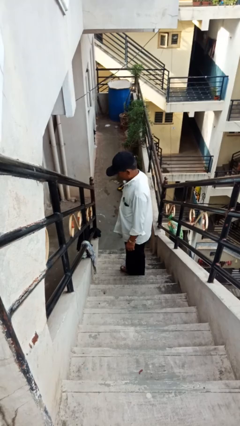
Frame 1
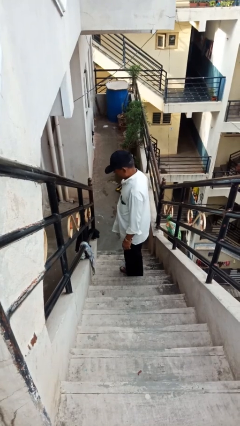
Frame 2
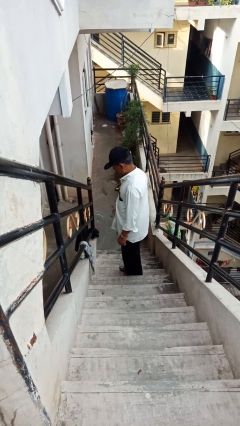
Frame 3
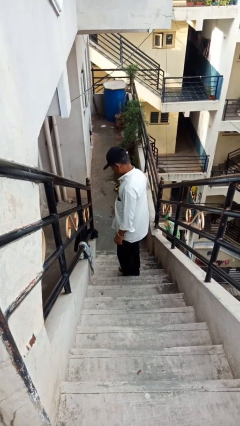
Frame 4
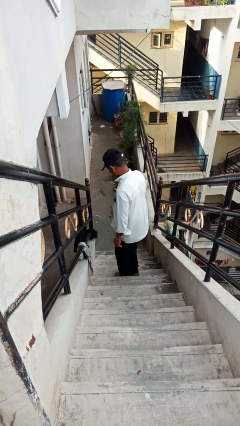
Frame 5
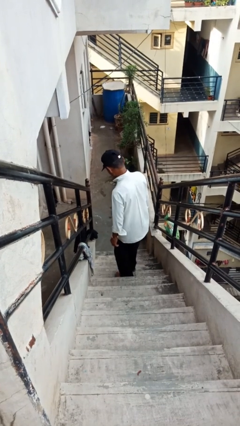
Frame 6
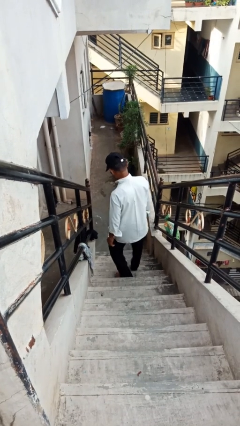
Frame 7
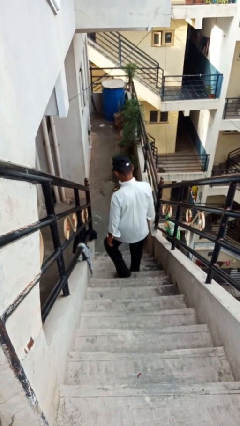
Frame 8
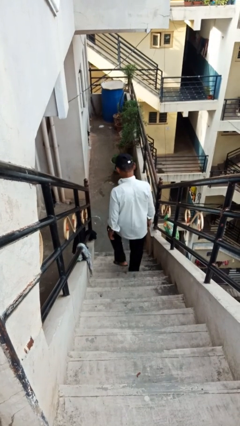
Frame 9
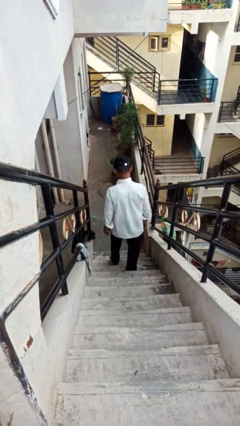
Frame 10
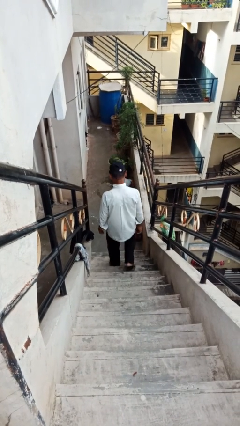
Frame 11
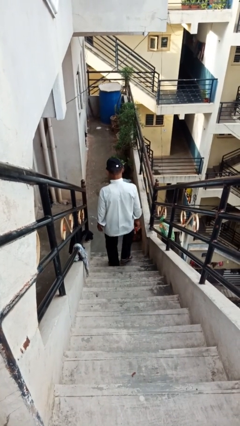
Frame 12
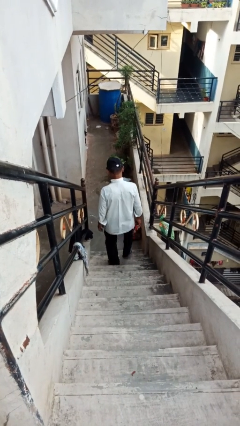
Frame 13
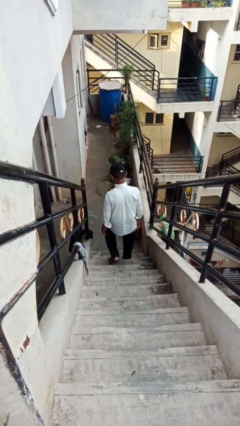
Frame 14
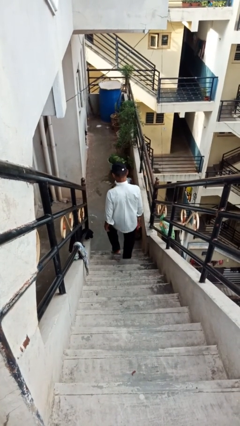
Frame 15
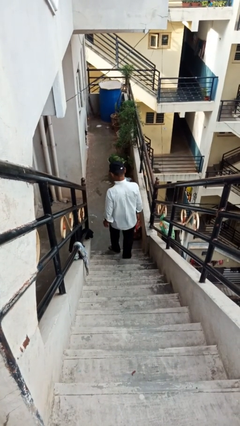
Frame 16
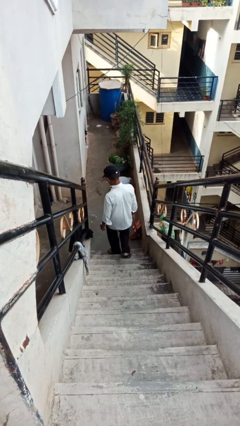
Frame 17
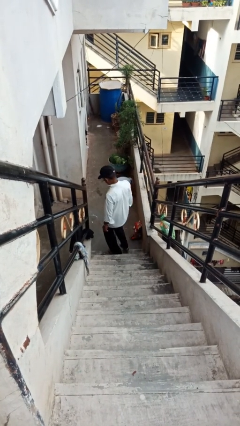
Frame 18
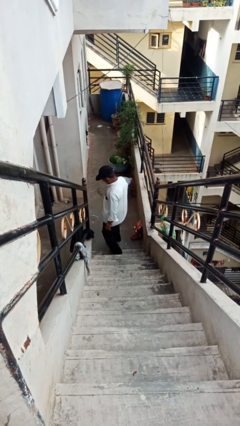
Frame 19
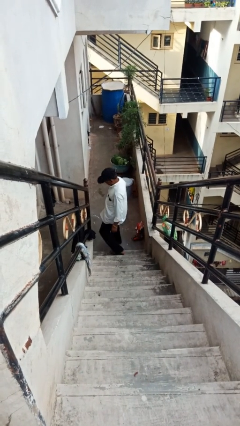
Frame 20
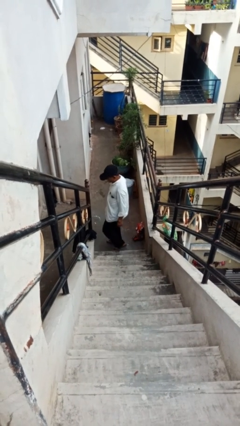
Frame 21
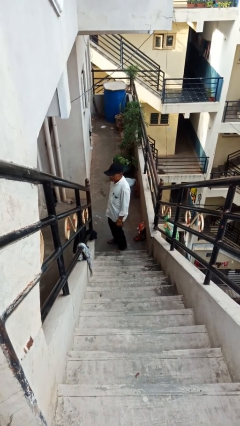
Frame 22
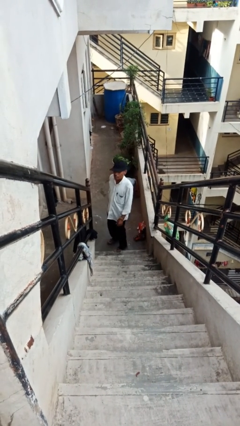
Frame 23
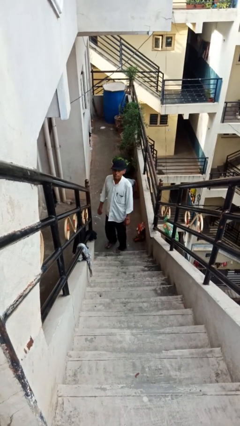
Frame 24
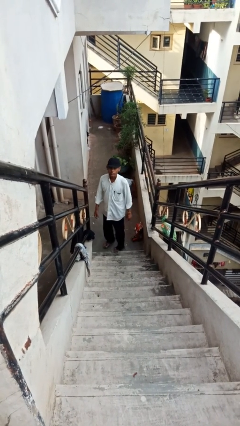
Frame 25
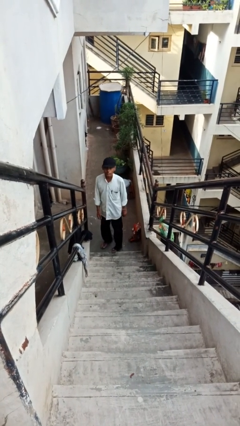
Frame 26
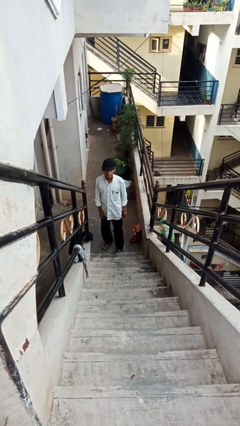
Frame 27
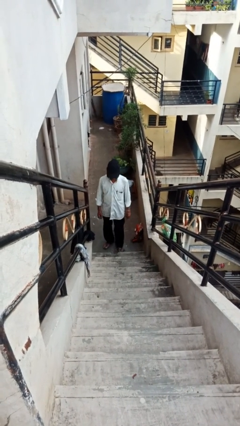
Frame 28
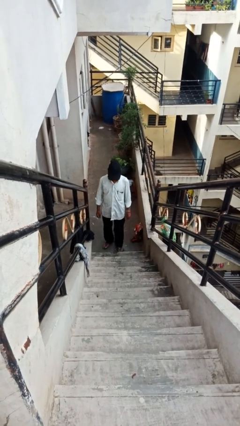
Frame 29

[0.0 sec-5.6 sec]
person climbs down stairs

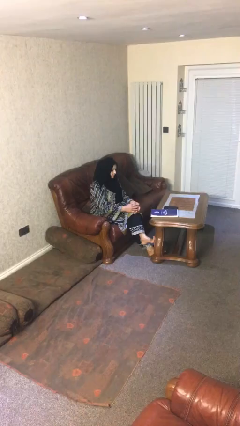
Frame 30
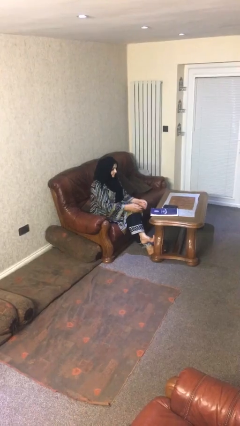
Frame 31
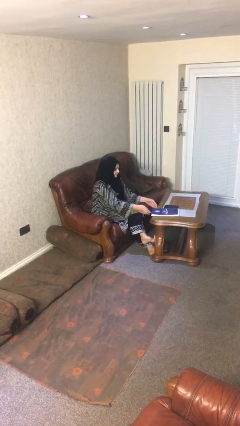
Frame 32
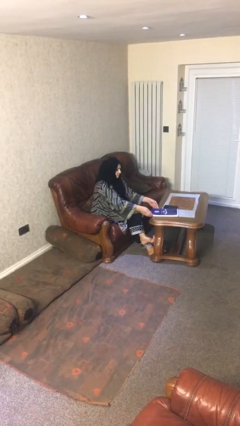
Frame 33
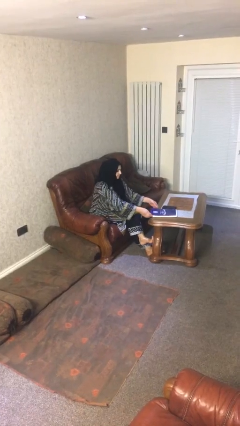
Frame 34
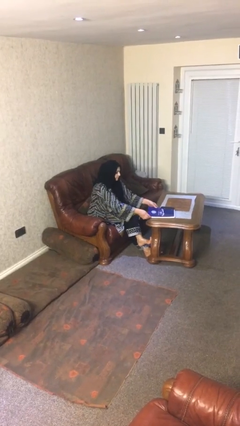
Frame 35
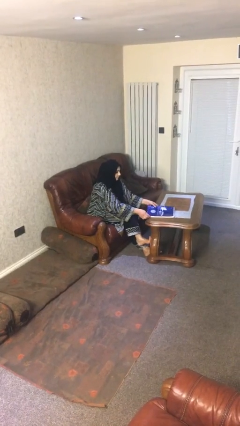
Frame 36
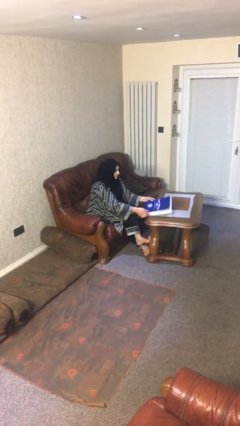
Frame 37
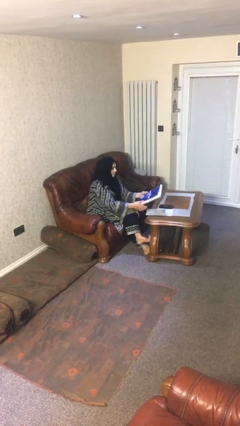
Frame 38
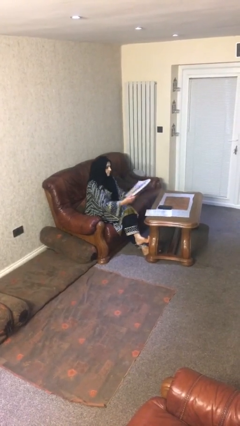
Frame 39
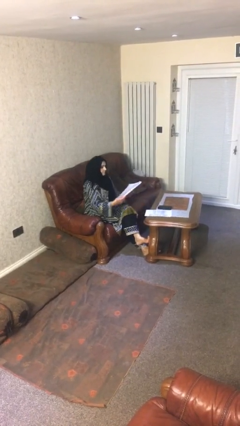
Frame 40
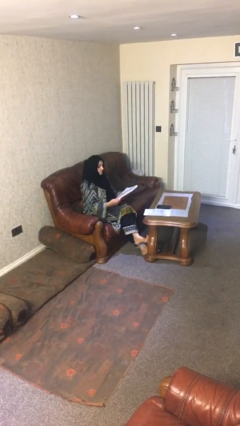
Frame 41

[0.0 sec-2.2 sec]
person picks up object from table

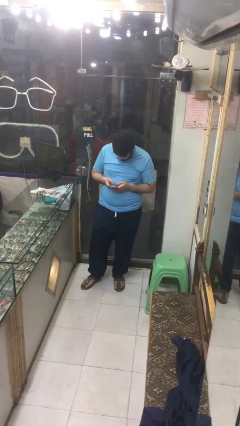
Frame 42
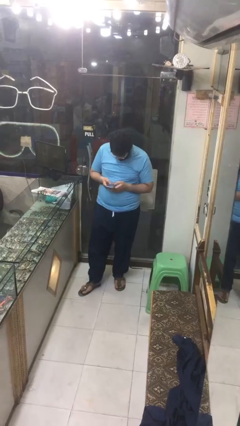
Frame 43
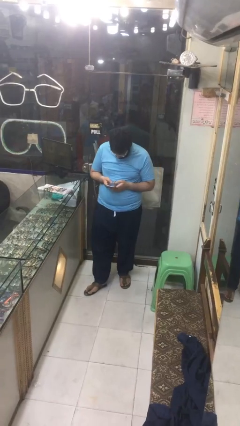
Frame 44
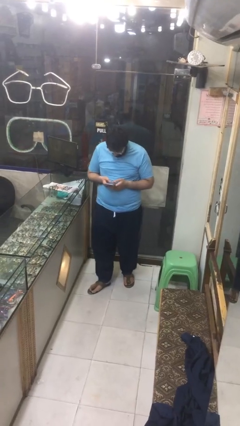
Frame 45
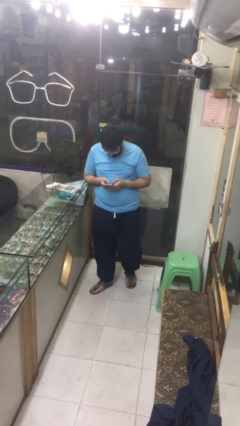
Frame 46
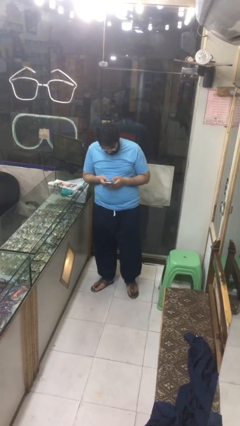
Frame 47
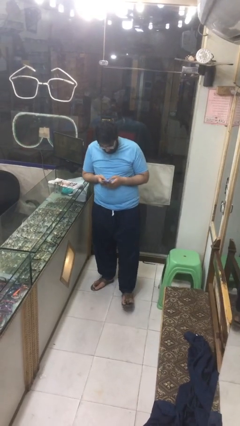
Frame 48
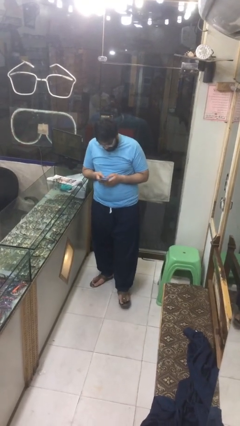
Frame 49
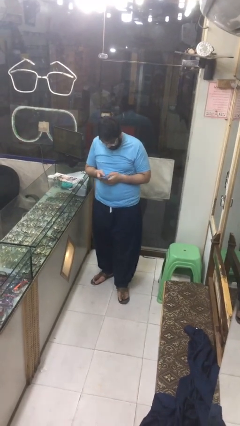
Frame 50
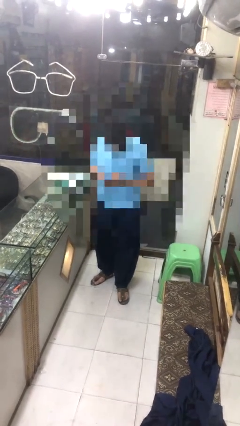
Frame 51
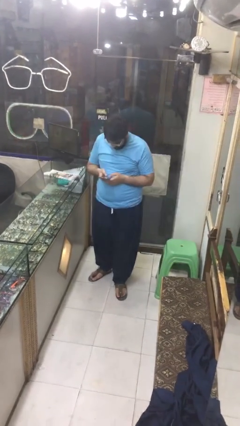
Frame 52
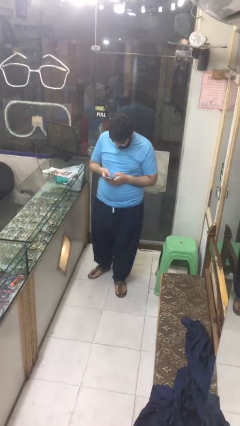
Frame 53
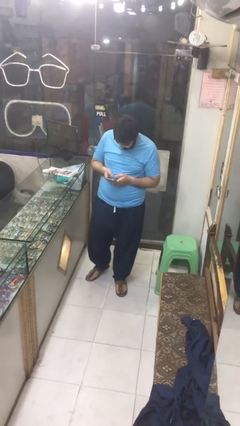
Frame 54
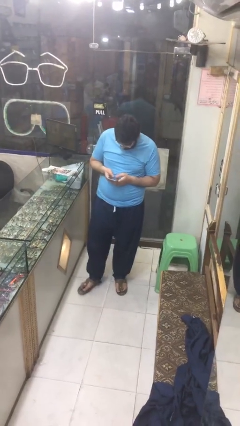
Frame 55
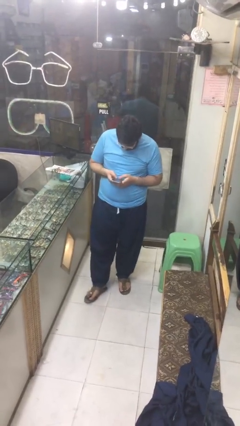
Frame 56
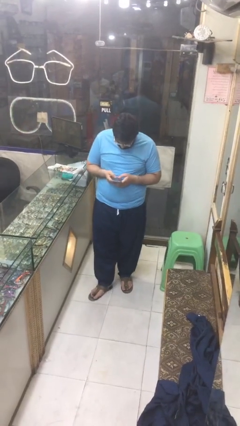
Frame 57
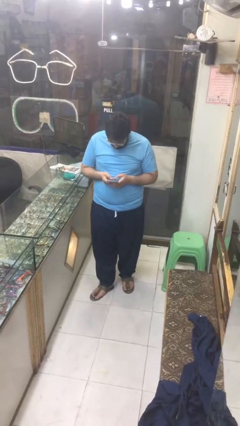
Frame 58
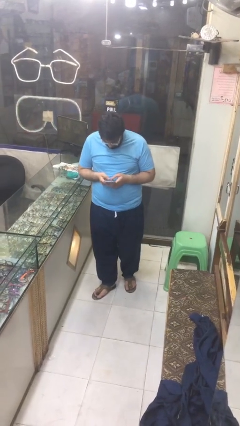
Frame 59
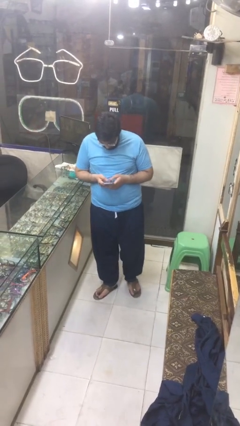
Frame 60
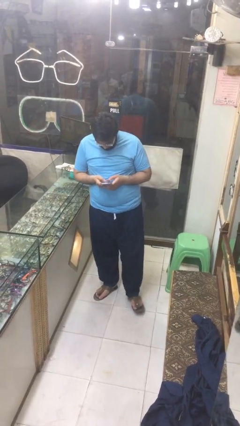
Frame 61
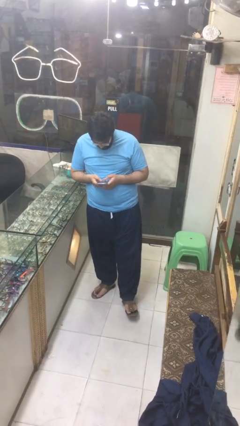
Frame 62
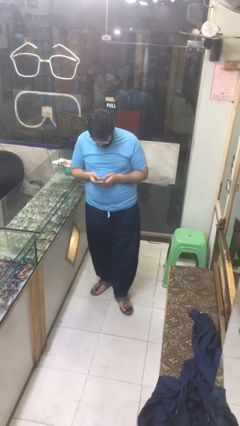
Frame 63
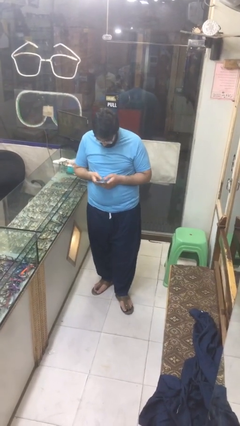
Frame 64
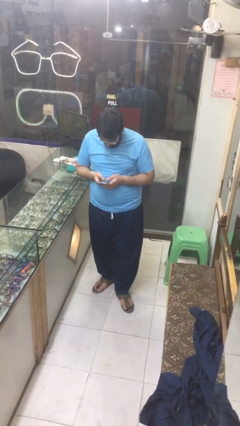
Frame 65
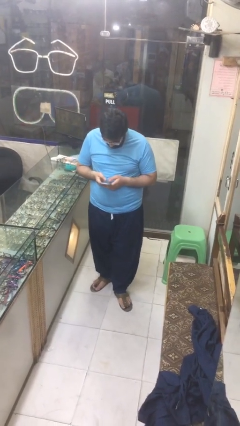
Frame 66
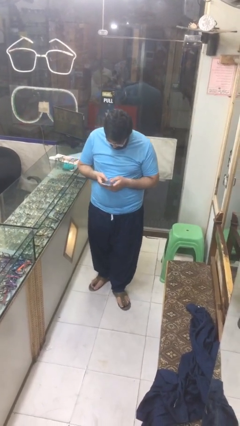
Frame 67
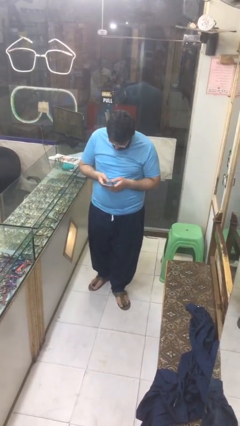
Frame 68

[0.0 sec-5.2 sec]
person texts on phone

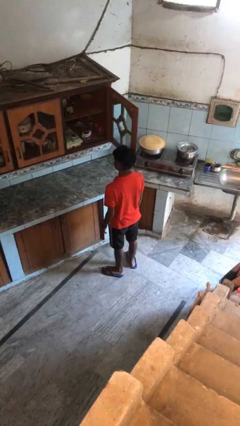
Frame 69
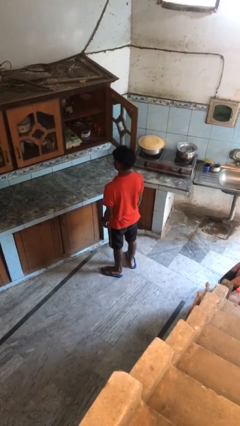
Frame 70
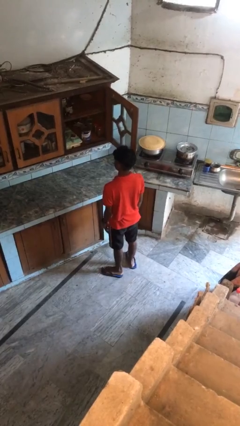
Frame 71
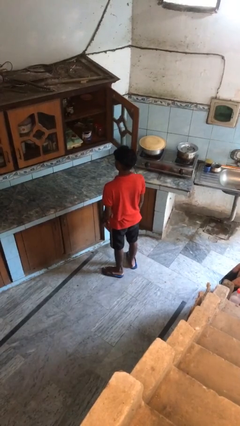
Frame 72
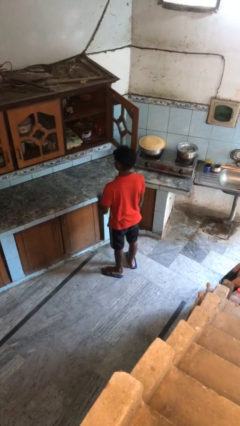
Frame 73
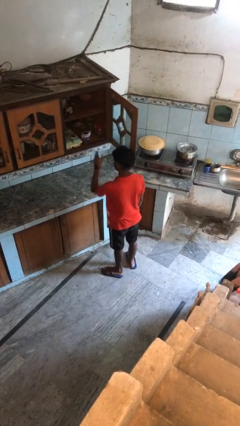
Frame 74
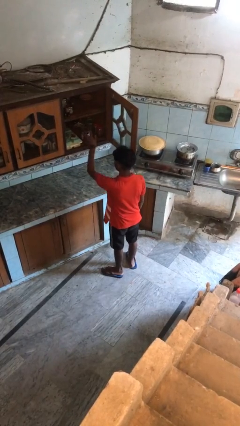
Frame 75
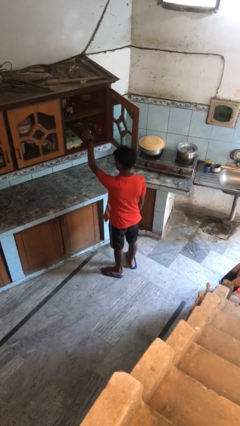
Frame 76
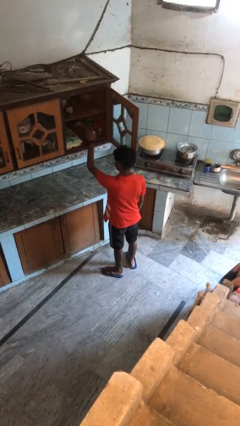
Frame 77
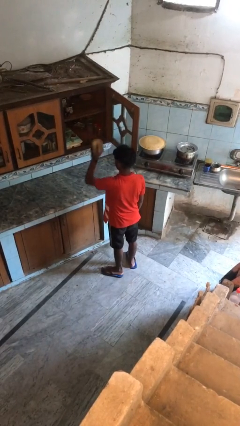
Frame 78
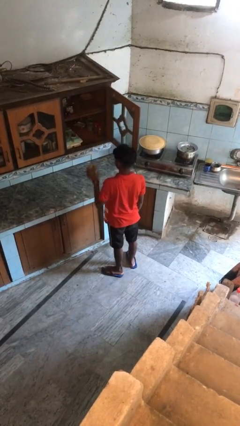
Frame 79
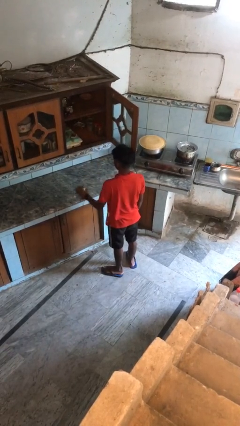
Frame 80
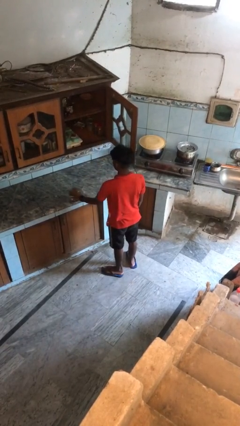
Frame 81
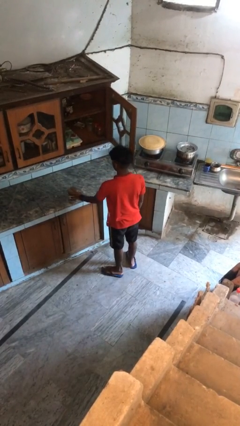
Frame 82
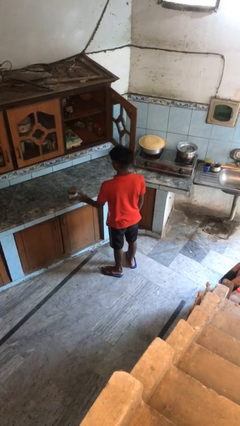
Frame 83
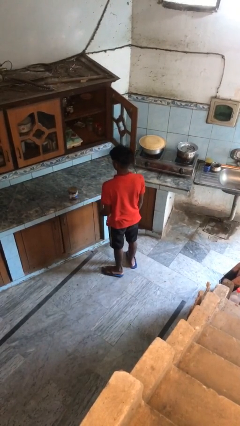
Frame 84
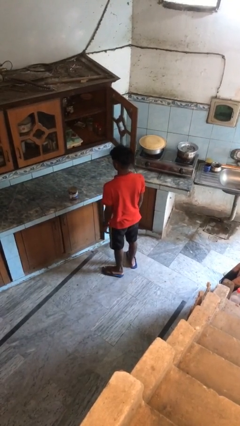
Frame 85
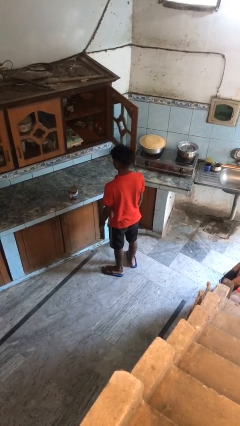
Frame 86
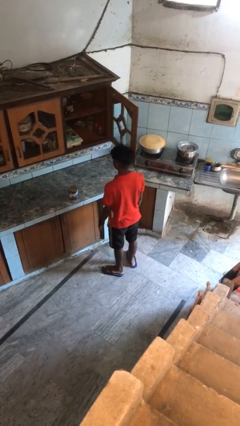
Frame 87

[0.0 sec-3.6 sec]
person takes object from cabinet

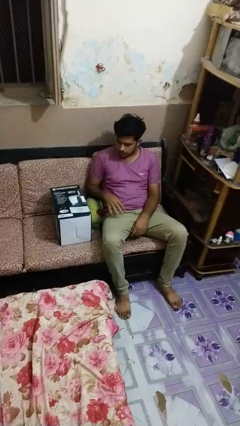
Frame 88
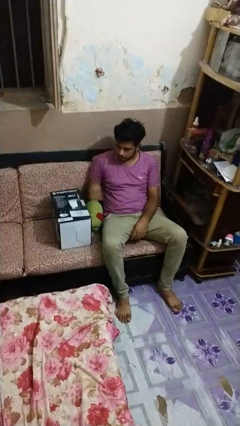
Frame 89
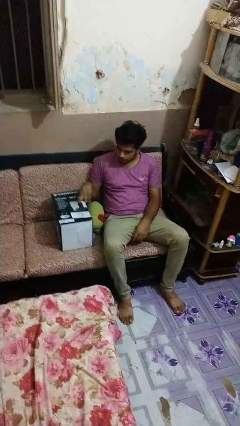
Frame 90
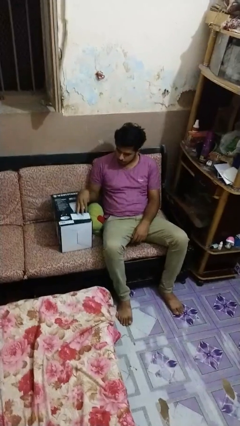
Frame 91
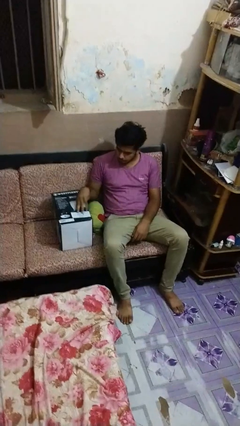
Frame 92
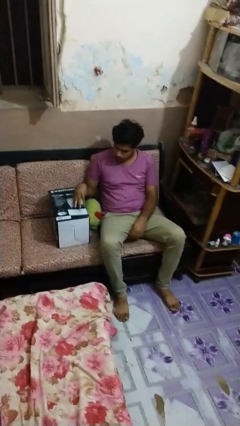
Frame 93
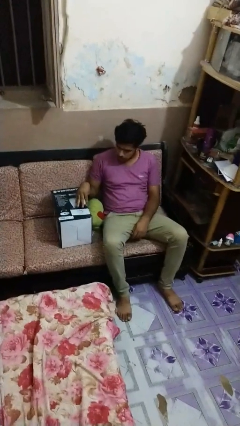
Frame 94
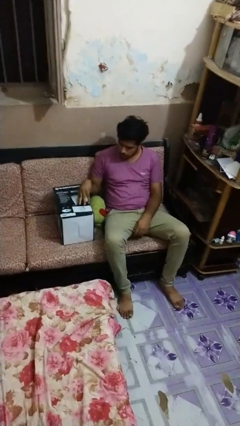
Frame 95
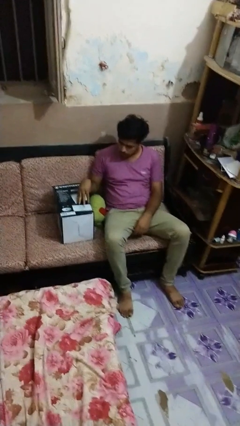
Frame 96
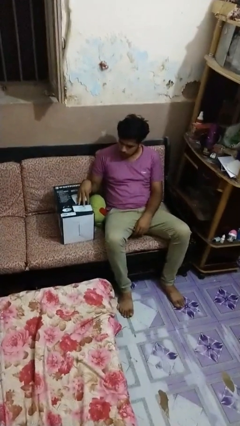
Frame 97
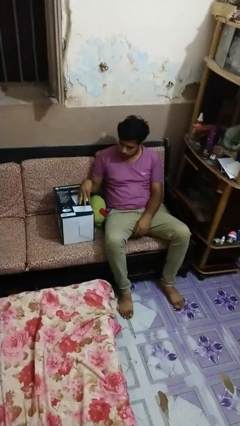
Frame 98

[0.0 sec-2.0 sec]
person taps object with finger
